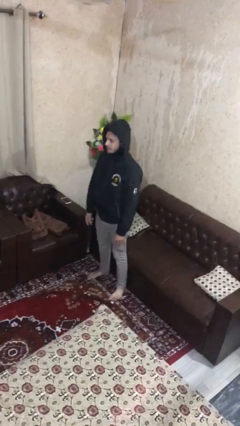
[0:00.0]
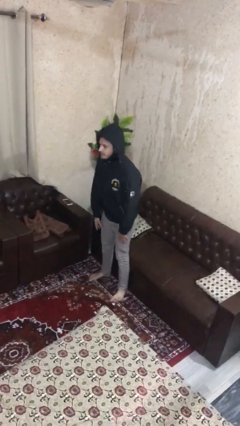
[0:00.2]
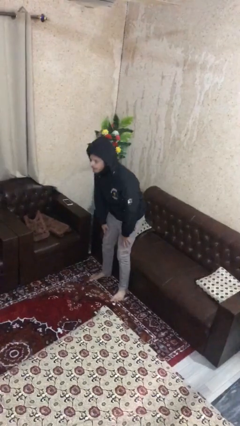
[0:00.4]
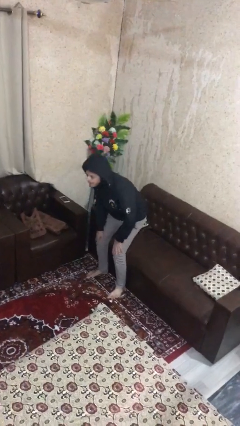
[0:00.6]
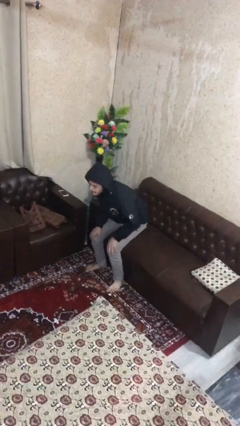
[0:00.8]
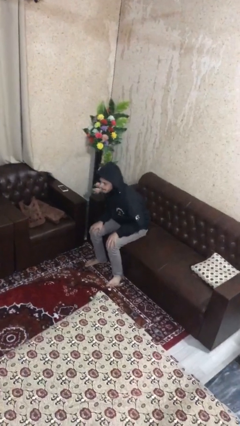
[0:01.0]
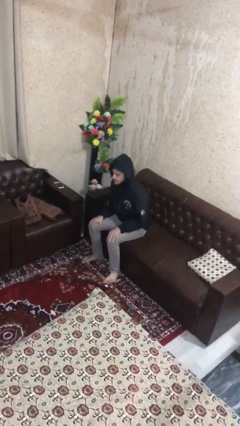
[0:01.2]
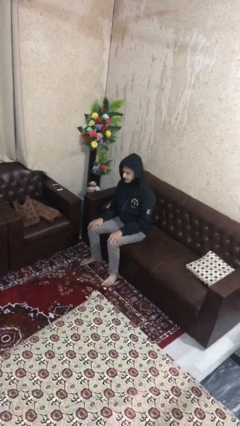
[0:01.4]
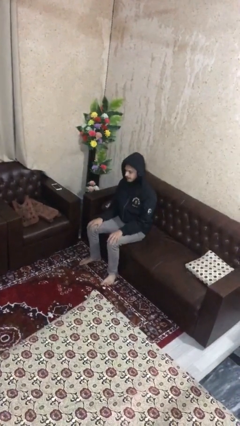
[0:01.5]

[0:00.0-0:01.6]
person sits down

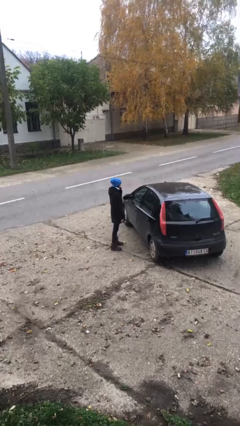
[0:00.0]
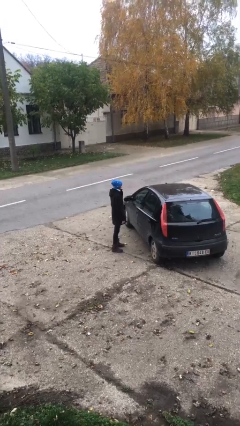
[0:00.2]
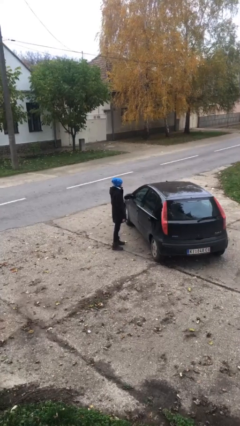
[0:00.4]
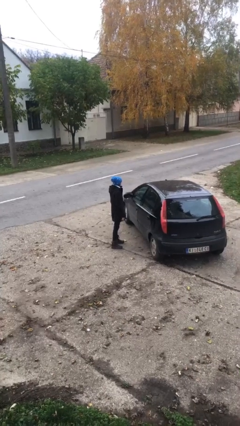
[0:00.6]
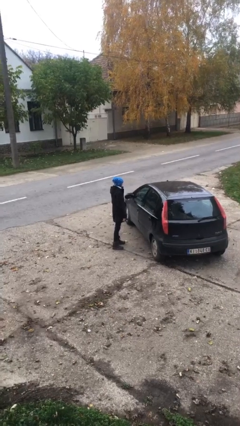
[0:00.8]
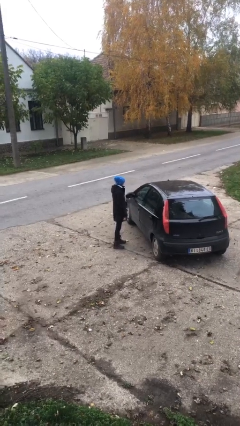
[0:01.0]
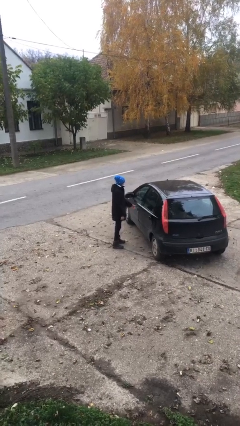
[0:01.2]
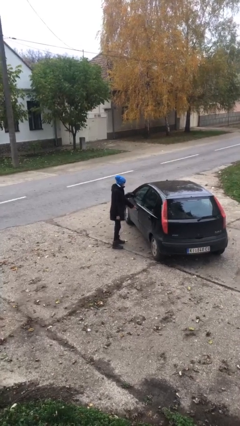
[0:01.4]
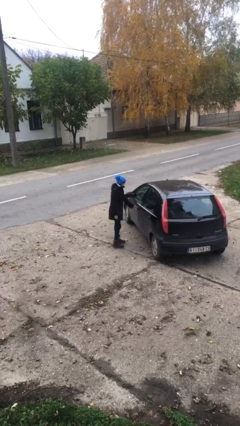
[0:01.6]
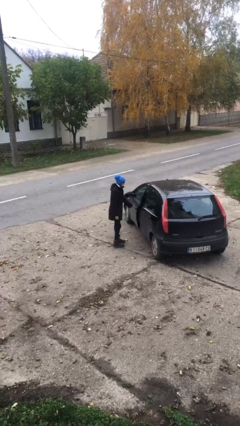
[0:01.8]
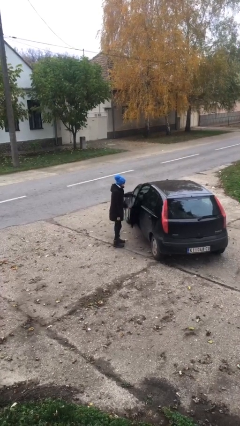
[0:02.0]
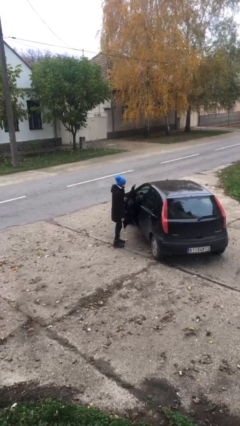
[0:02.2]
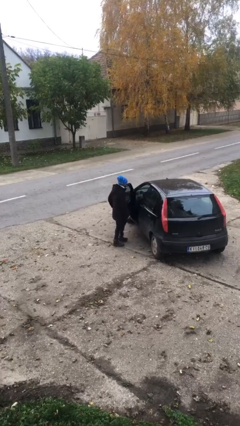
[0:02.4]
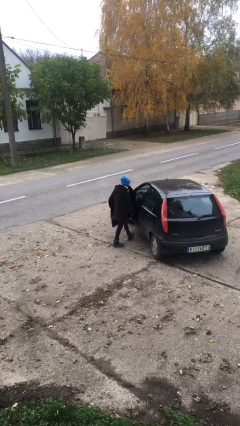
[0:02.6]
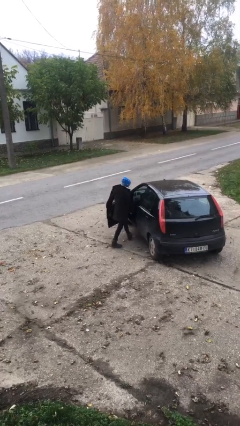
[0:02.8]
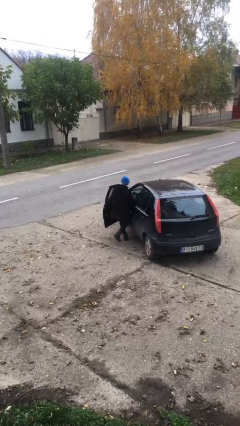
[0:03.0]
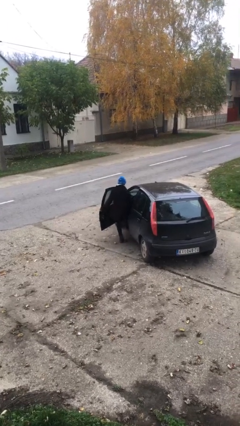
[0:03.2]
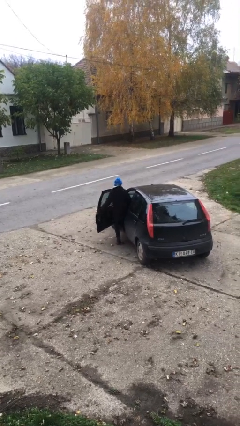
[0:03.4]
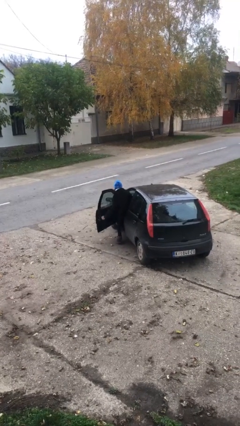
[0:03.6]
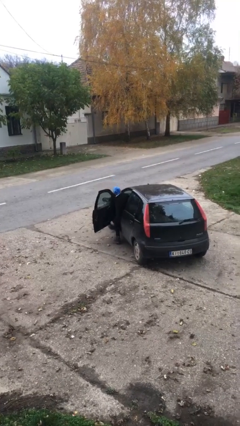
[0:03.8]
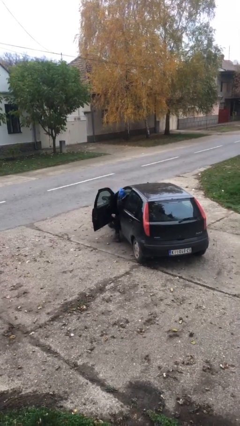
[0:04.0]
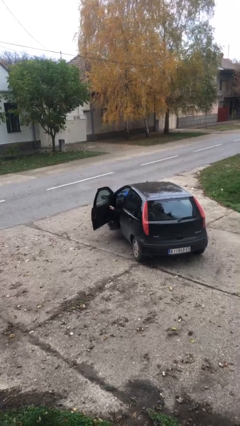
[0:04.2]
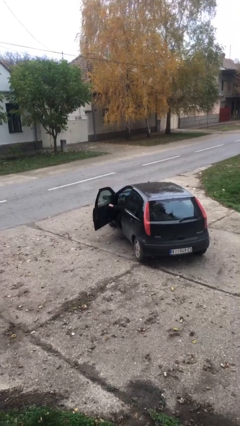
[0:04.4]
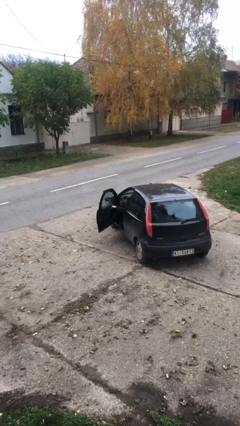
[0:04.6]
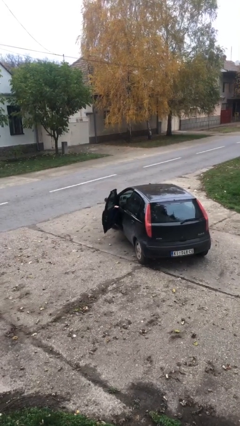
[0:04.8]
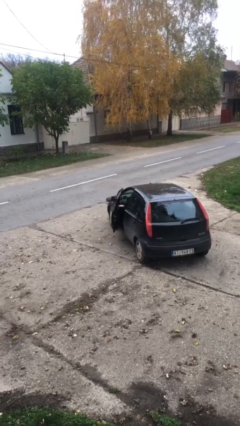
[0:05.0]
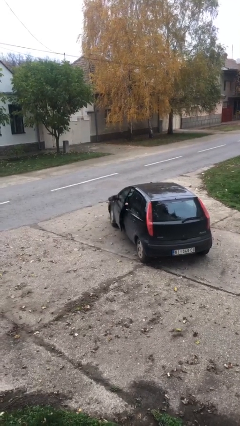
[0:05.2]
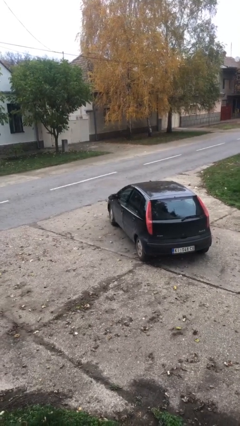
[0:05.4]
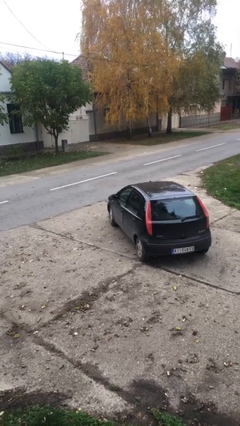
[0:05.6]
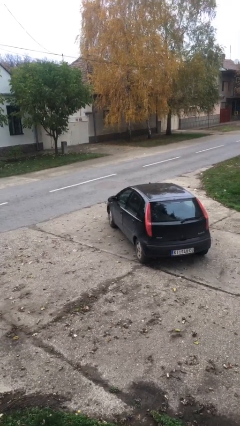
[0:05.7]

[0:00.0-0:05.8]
person enters car

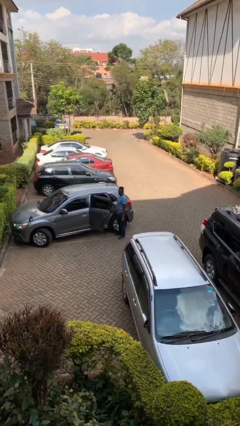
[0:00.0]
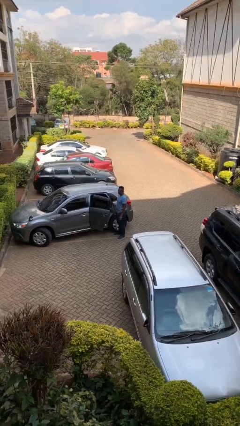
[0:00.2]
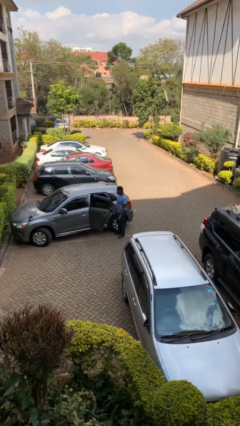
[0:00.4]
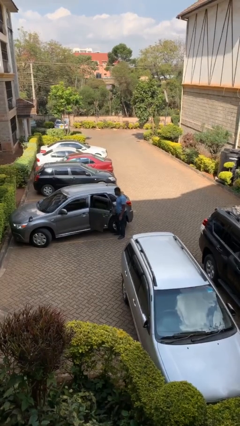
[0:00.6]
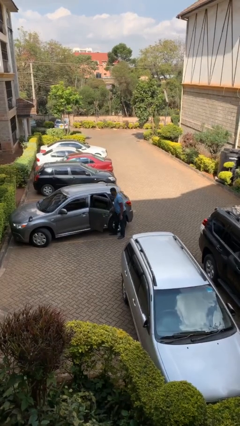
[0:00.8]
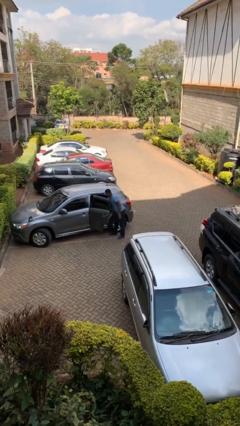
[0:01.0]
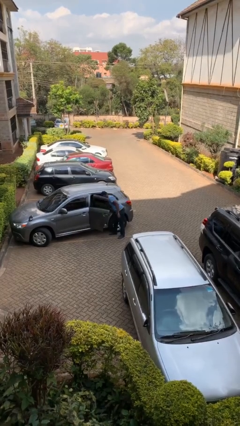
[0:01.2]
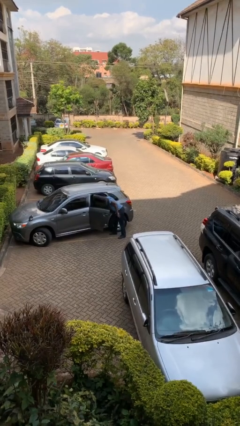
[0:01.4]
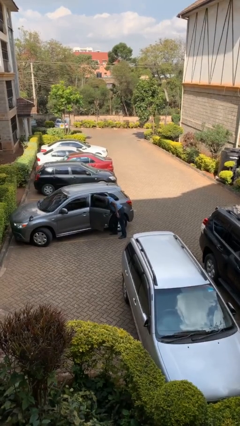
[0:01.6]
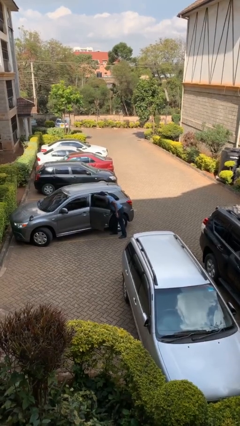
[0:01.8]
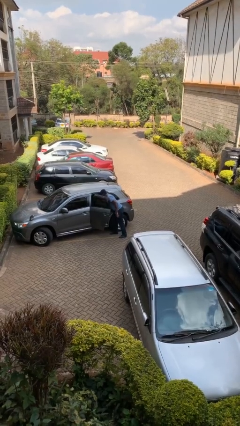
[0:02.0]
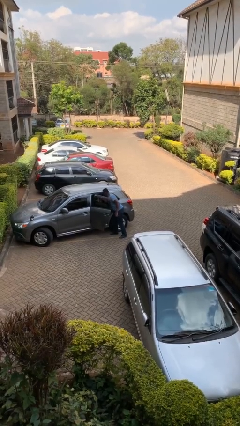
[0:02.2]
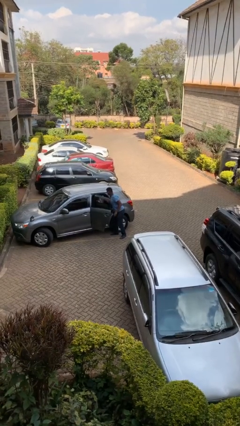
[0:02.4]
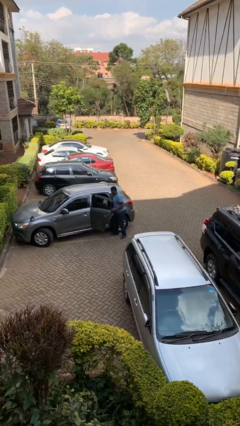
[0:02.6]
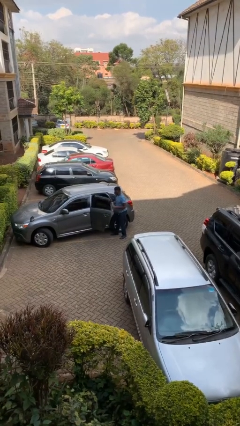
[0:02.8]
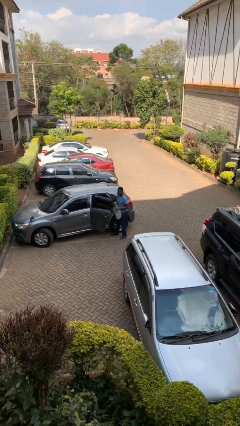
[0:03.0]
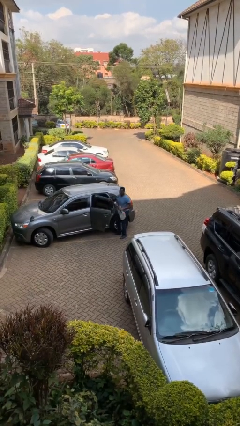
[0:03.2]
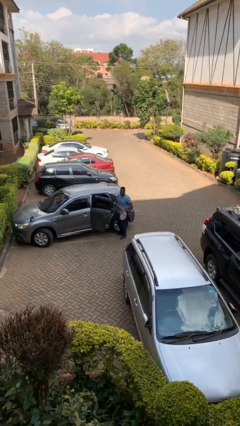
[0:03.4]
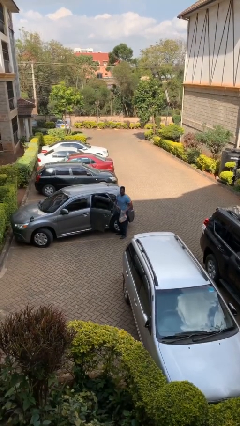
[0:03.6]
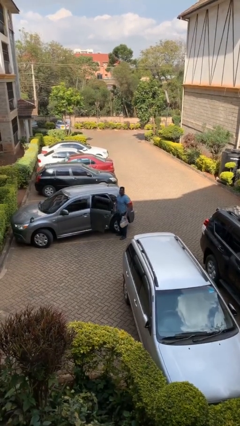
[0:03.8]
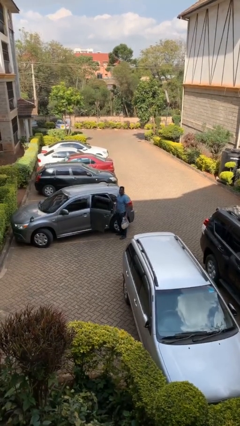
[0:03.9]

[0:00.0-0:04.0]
person unloads car

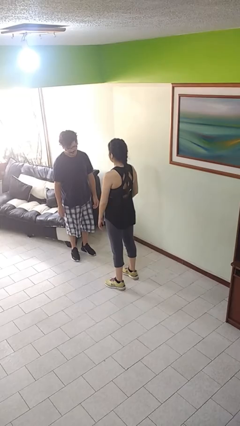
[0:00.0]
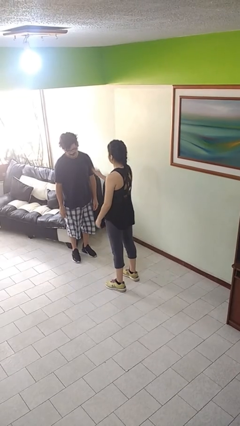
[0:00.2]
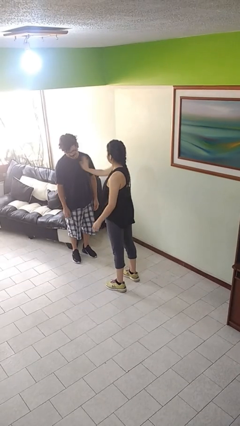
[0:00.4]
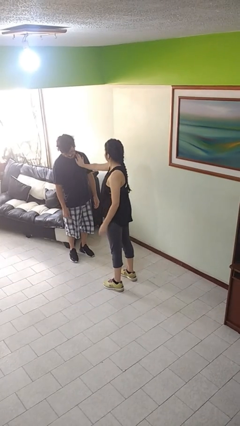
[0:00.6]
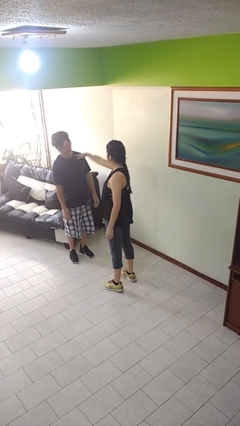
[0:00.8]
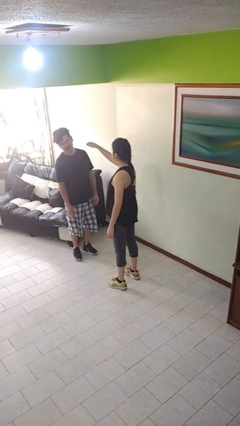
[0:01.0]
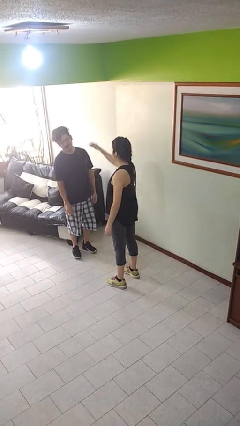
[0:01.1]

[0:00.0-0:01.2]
person shoves person

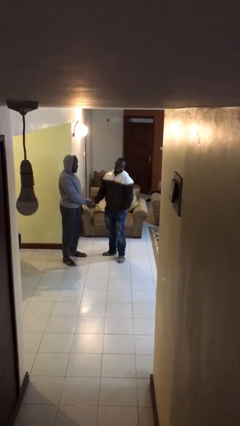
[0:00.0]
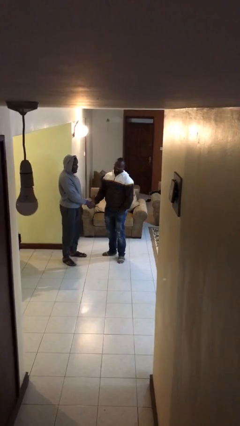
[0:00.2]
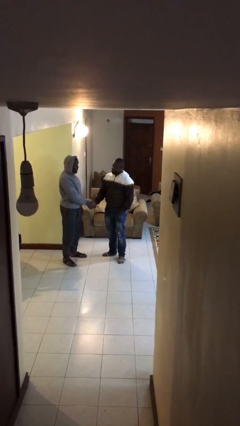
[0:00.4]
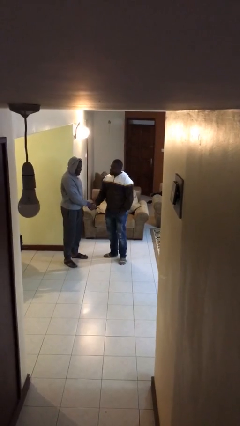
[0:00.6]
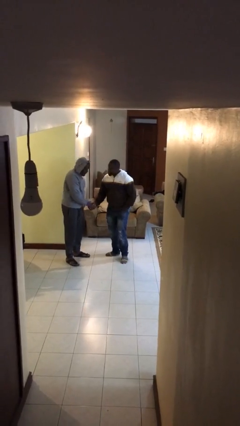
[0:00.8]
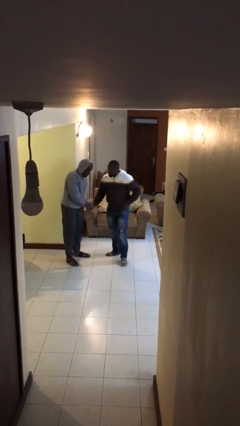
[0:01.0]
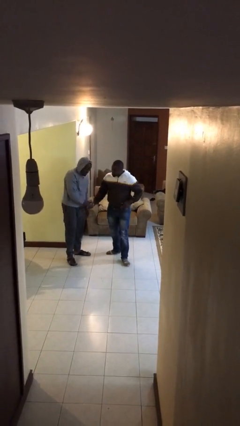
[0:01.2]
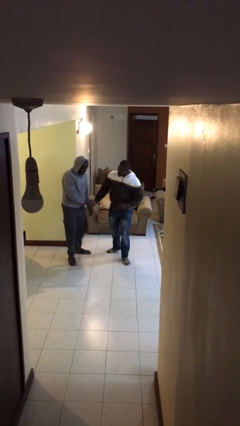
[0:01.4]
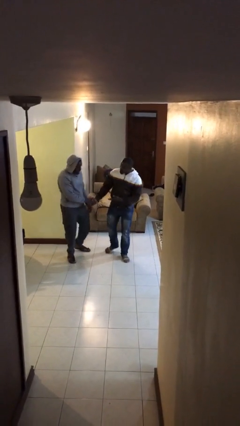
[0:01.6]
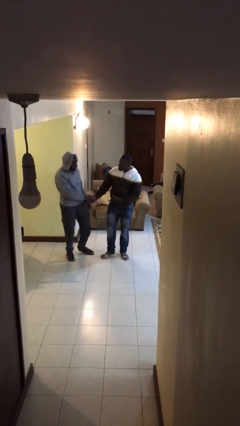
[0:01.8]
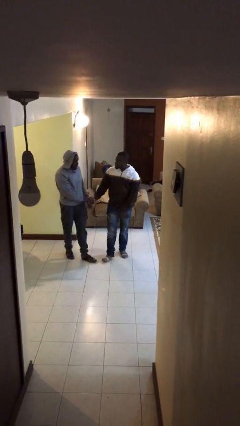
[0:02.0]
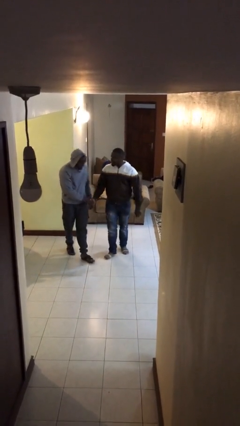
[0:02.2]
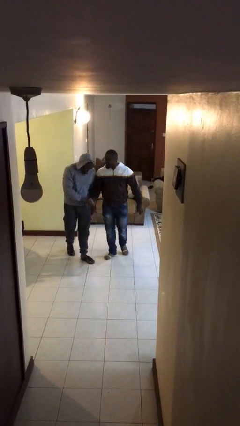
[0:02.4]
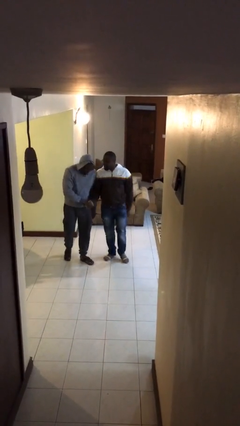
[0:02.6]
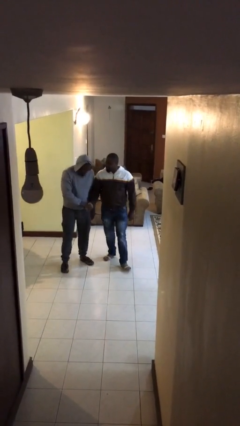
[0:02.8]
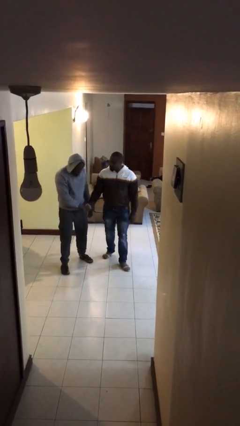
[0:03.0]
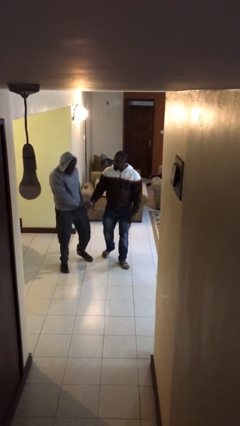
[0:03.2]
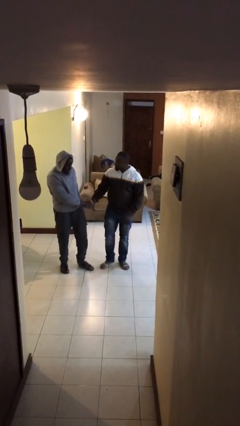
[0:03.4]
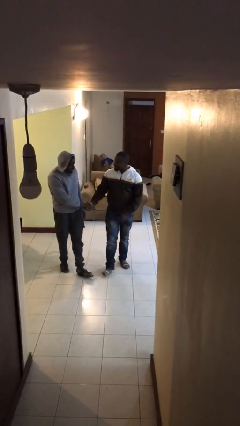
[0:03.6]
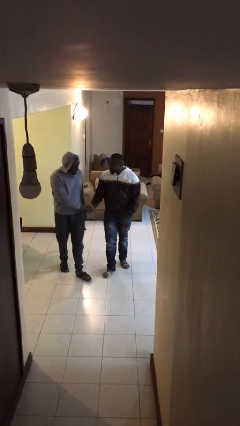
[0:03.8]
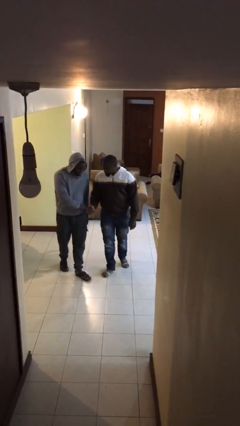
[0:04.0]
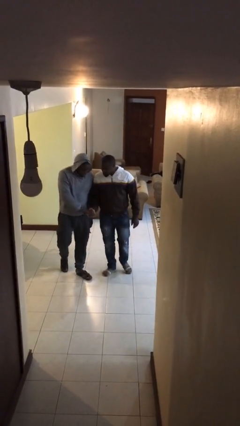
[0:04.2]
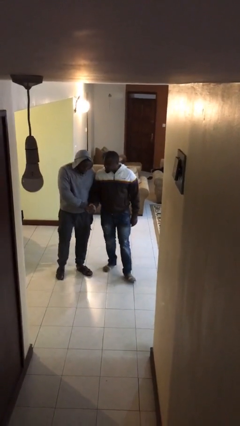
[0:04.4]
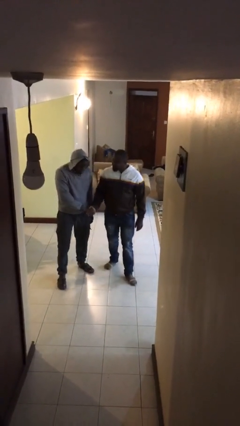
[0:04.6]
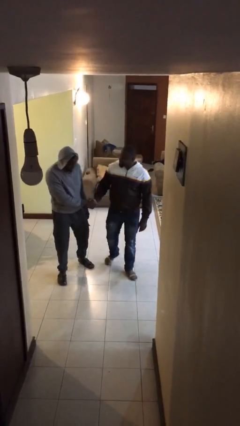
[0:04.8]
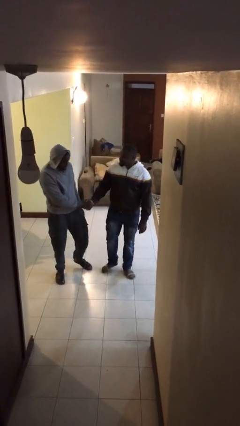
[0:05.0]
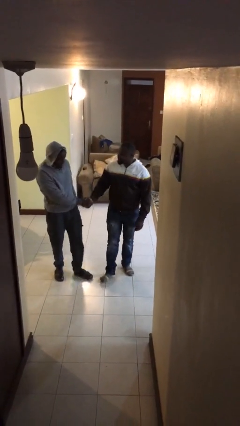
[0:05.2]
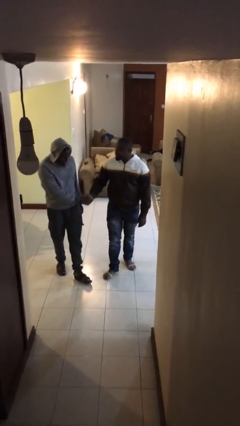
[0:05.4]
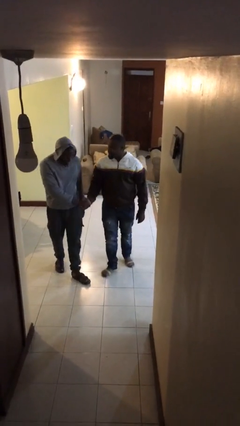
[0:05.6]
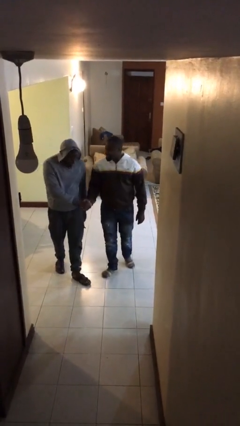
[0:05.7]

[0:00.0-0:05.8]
person holds hand
